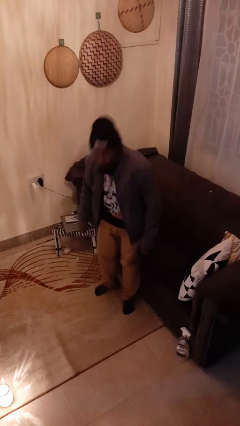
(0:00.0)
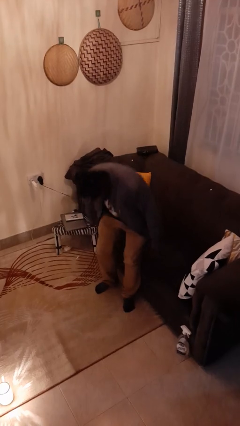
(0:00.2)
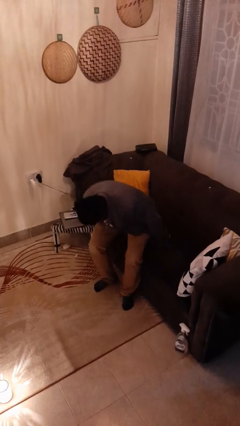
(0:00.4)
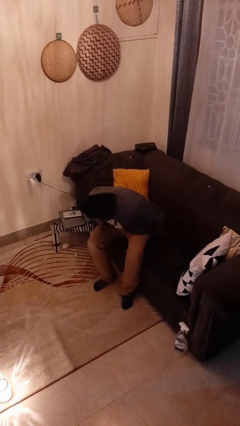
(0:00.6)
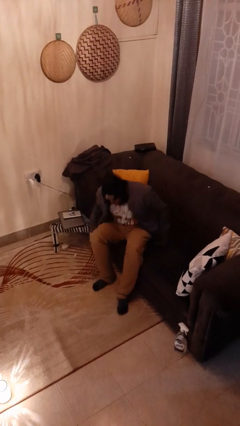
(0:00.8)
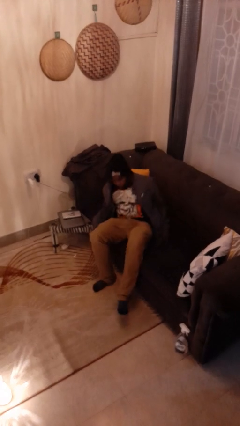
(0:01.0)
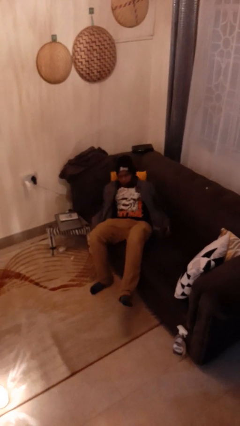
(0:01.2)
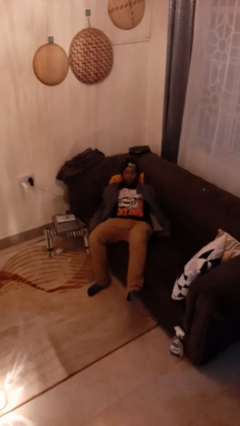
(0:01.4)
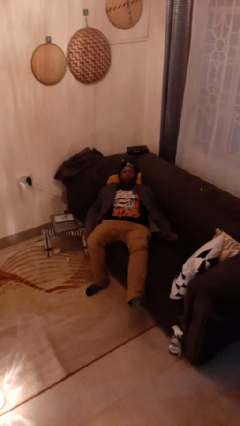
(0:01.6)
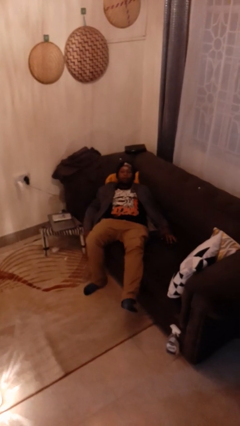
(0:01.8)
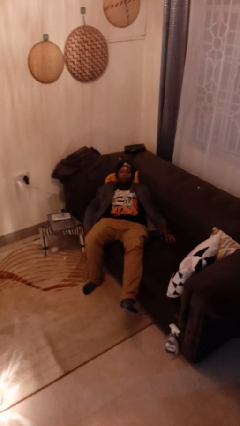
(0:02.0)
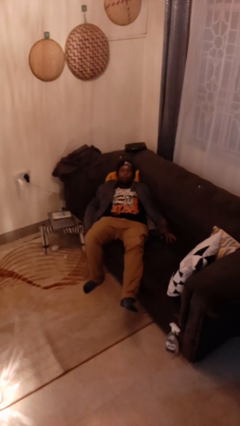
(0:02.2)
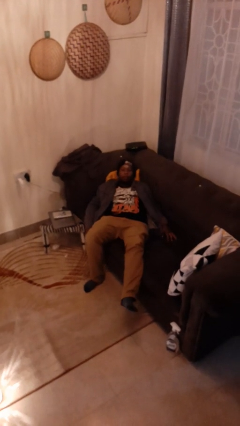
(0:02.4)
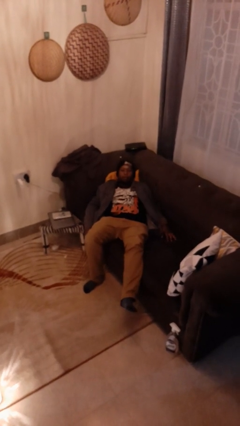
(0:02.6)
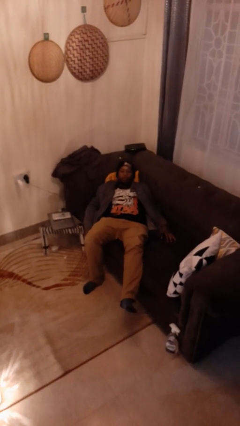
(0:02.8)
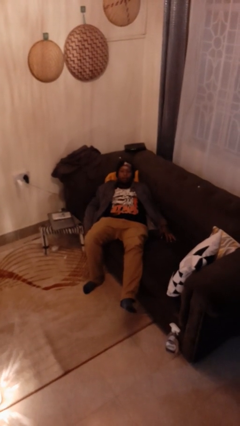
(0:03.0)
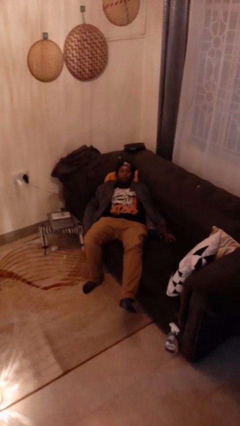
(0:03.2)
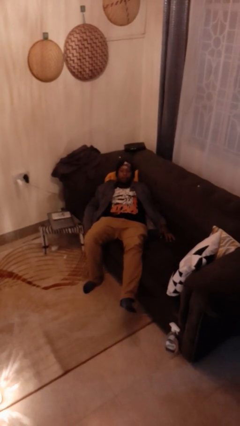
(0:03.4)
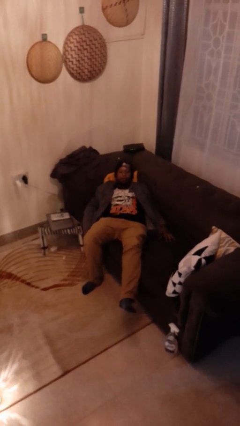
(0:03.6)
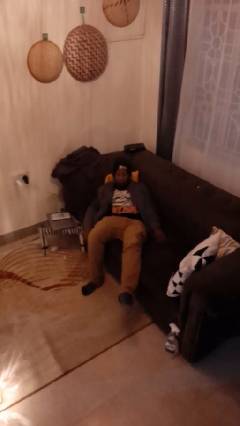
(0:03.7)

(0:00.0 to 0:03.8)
person lies down on couch

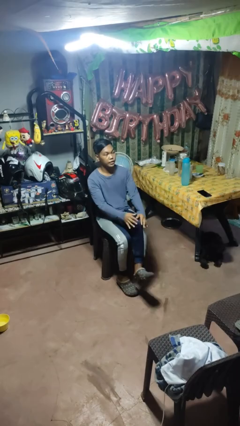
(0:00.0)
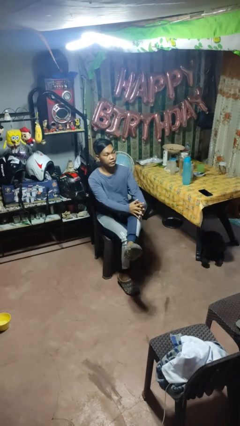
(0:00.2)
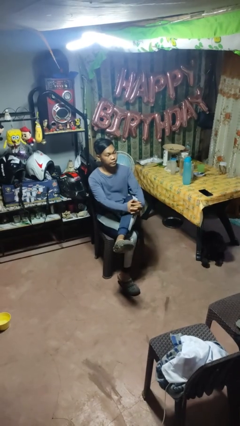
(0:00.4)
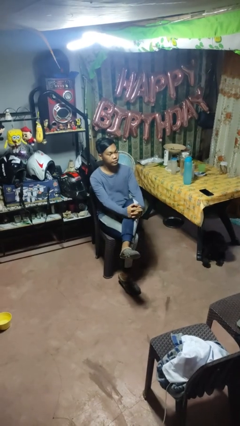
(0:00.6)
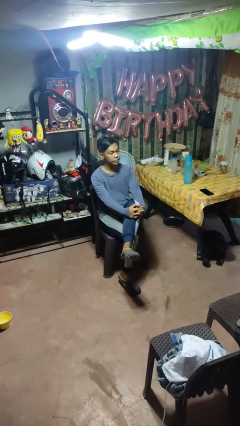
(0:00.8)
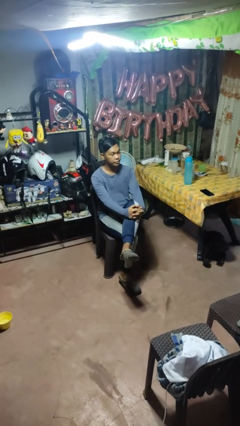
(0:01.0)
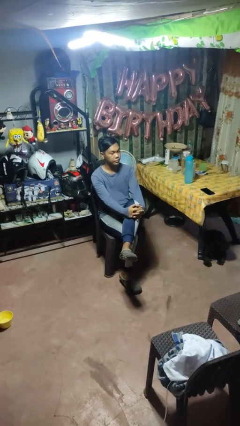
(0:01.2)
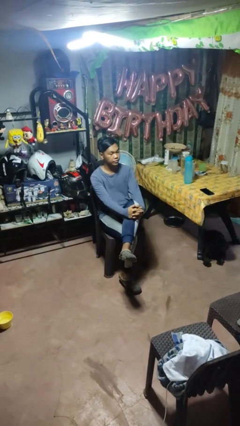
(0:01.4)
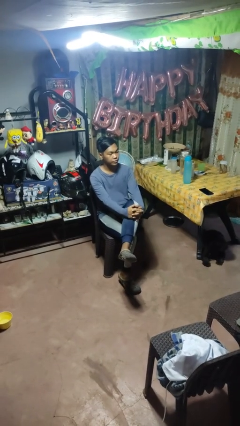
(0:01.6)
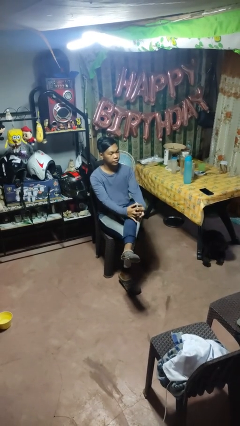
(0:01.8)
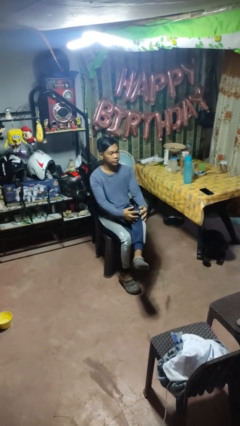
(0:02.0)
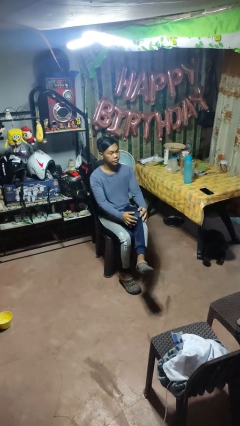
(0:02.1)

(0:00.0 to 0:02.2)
person crosses legs

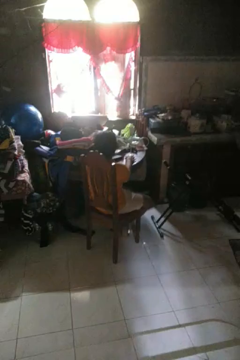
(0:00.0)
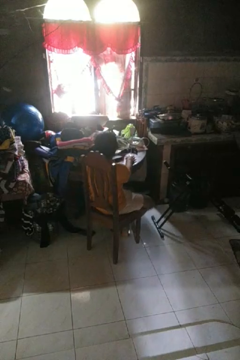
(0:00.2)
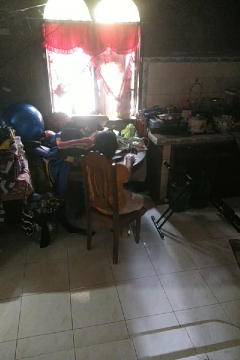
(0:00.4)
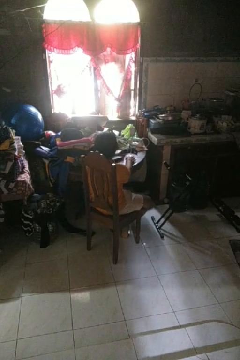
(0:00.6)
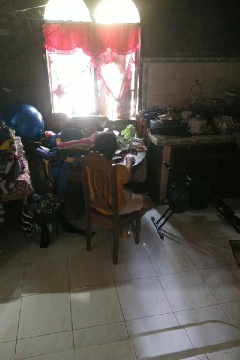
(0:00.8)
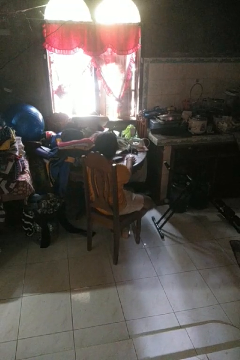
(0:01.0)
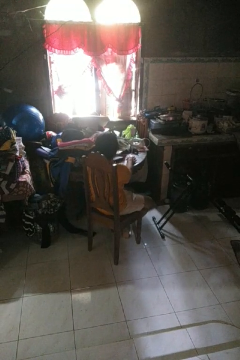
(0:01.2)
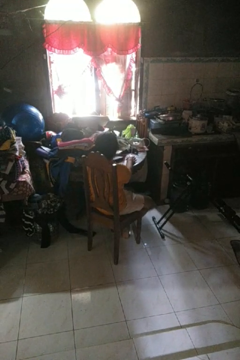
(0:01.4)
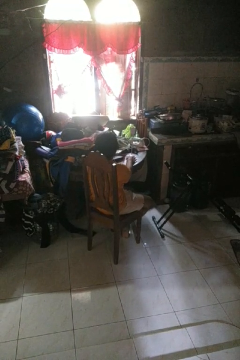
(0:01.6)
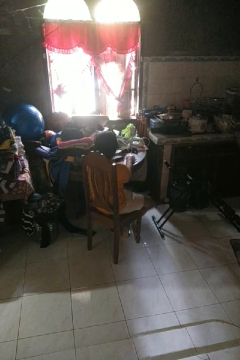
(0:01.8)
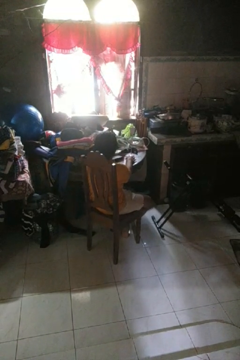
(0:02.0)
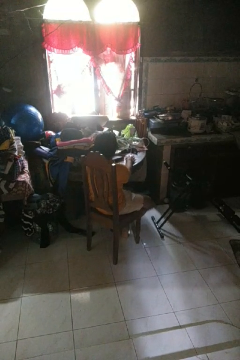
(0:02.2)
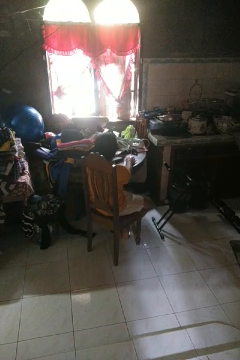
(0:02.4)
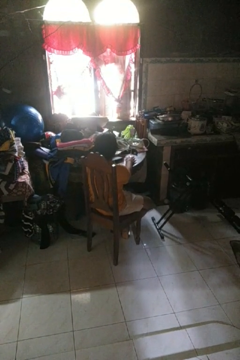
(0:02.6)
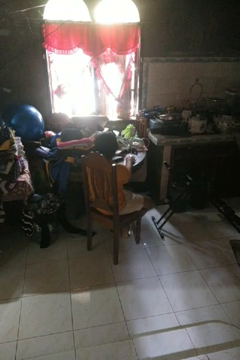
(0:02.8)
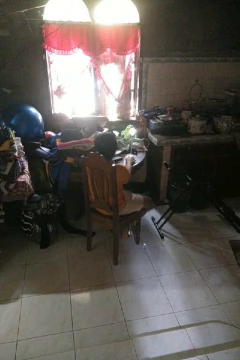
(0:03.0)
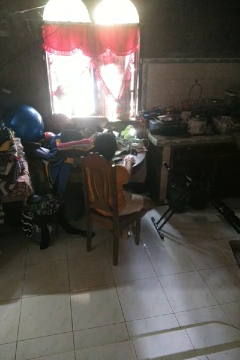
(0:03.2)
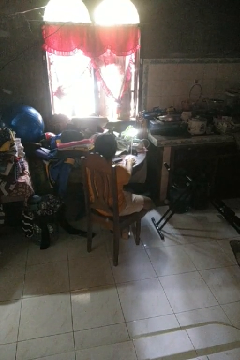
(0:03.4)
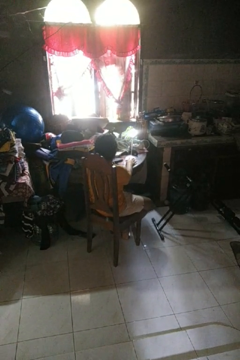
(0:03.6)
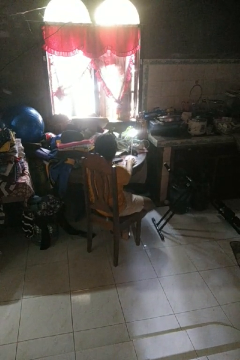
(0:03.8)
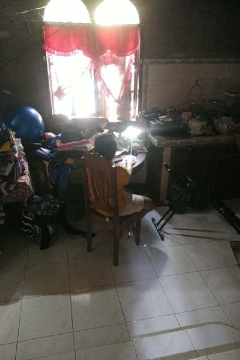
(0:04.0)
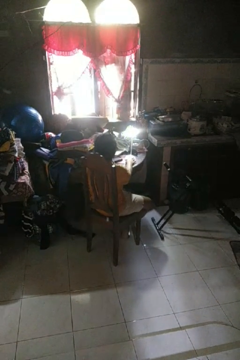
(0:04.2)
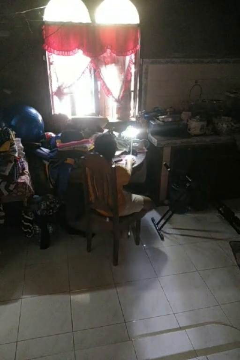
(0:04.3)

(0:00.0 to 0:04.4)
person turns on lamp

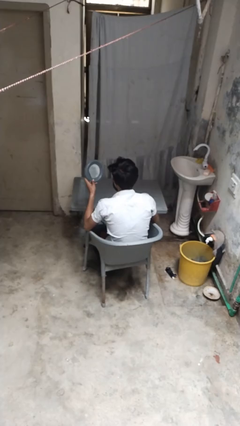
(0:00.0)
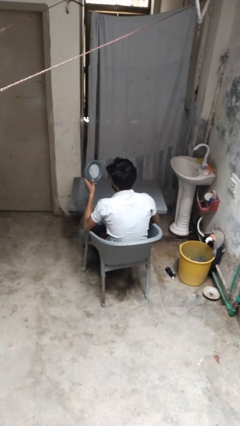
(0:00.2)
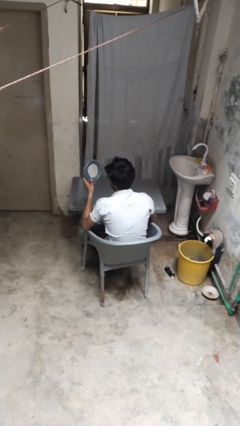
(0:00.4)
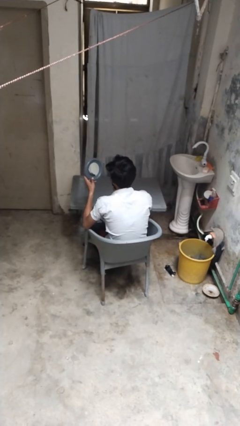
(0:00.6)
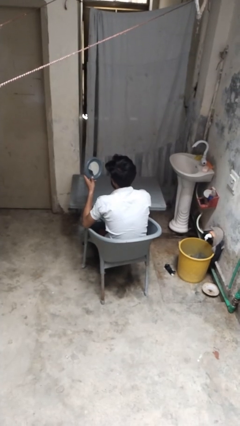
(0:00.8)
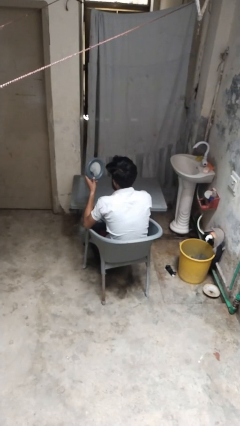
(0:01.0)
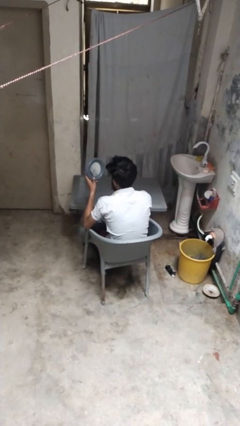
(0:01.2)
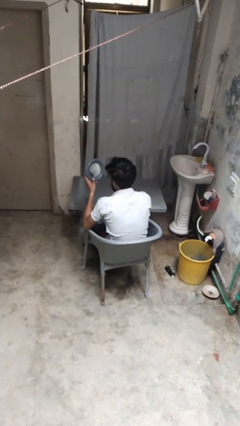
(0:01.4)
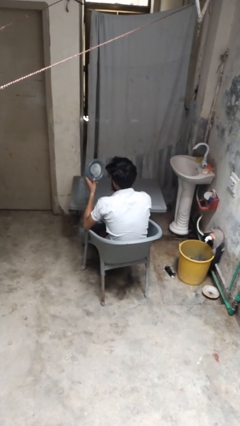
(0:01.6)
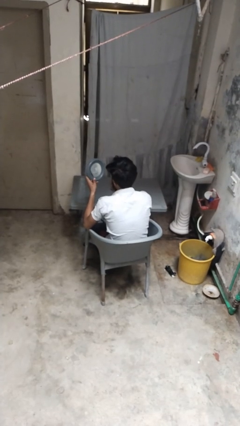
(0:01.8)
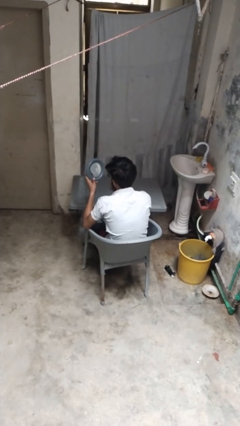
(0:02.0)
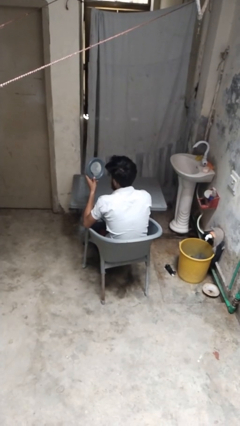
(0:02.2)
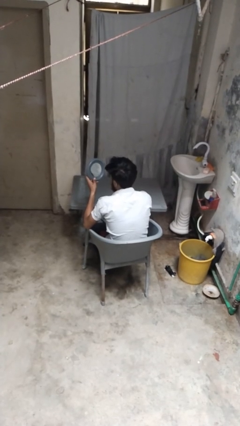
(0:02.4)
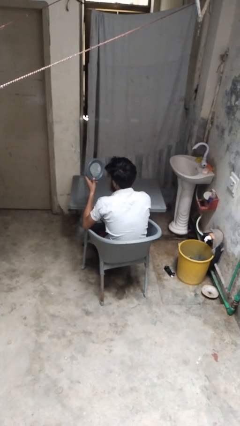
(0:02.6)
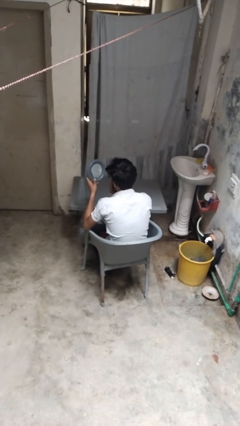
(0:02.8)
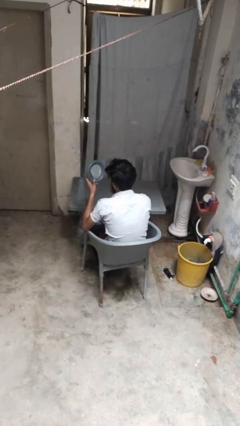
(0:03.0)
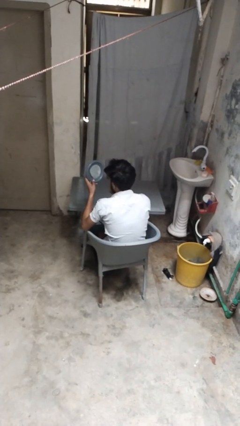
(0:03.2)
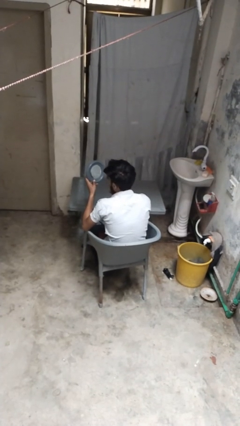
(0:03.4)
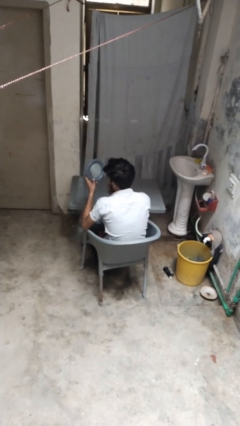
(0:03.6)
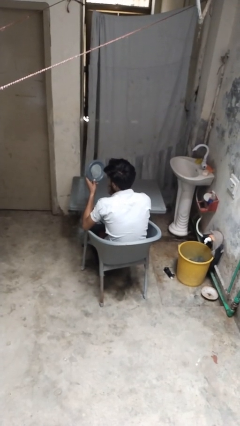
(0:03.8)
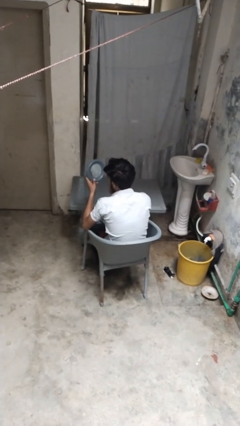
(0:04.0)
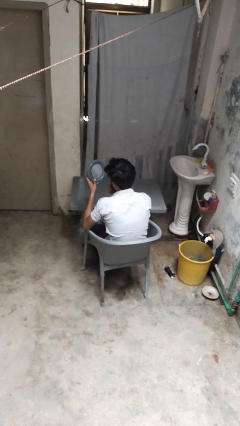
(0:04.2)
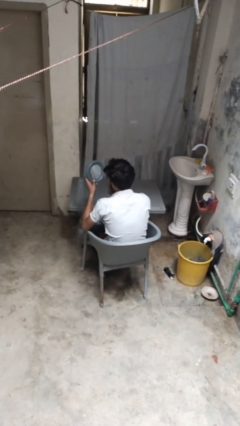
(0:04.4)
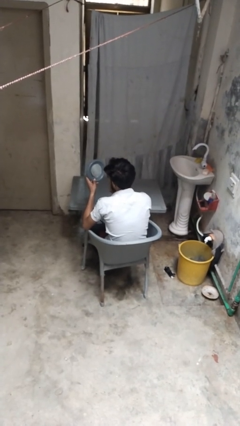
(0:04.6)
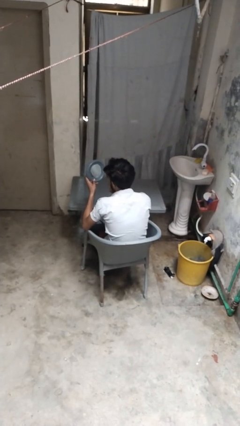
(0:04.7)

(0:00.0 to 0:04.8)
person applies lip makeup

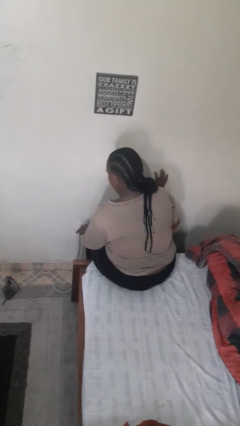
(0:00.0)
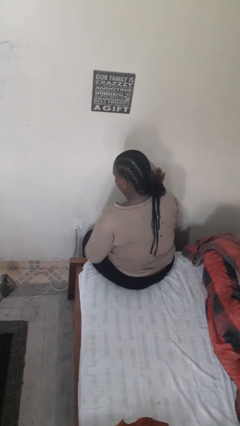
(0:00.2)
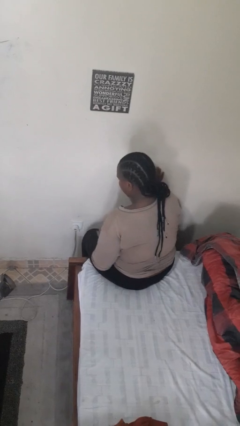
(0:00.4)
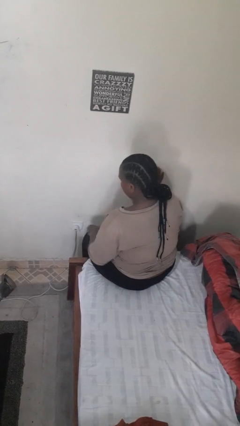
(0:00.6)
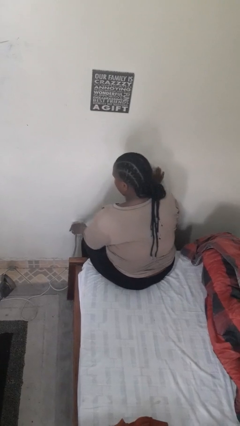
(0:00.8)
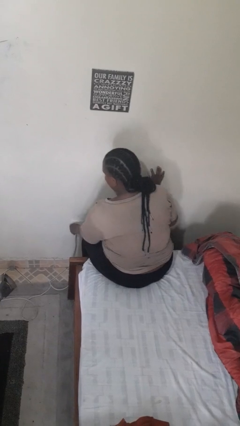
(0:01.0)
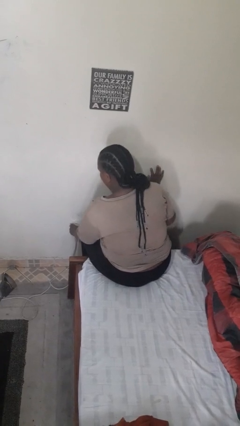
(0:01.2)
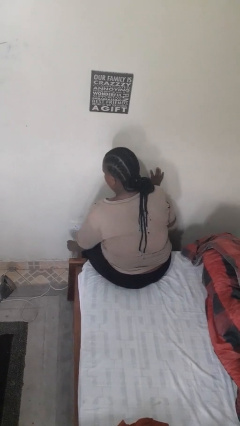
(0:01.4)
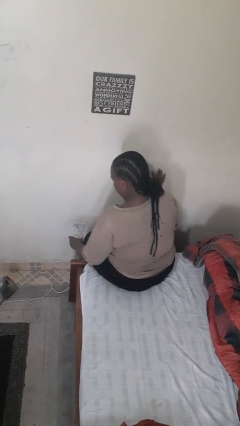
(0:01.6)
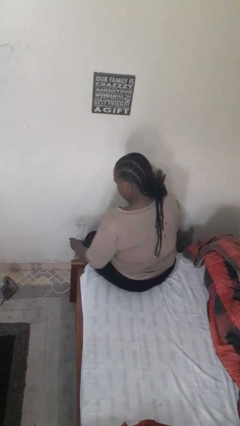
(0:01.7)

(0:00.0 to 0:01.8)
person unplugs from electrical socket

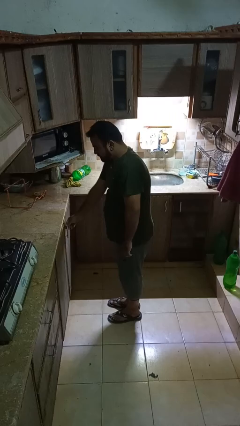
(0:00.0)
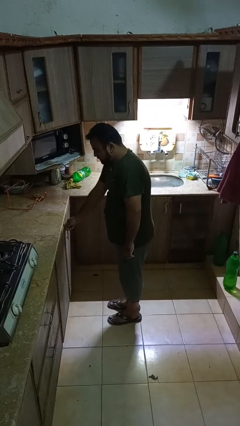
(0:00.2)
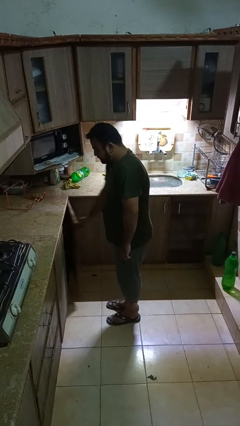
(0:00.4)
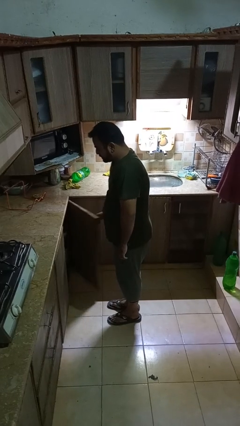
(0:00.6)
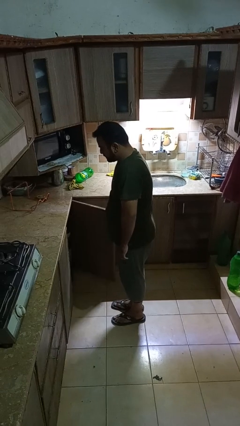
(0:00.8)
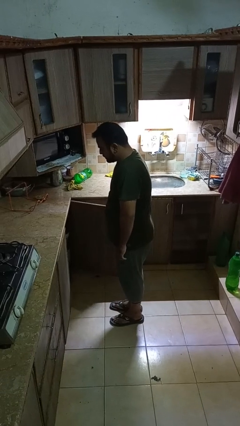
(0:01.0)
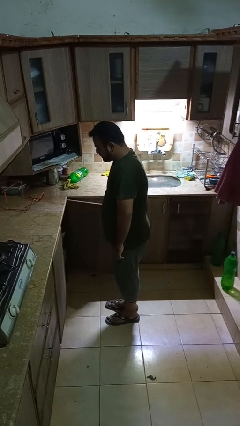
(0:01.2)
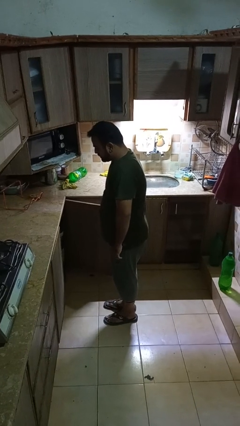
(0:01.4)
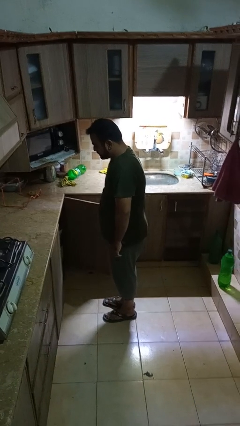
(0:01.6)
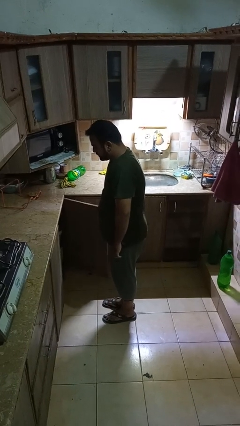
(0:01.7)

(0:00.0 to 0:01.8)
person opens cabinet
